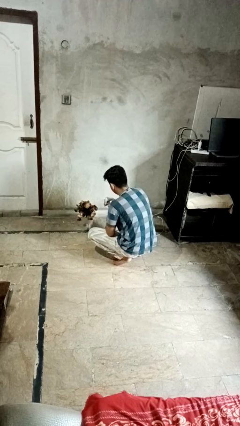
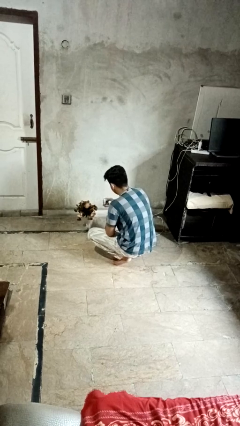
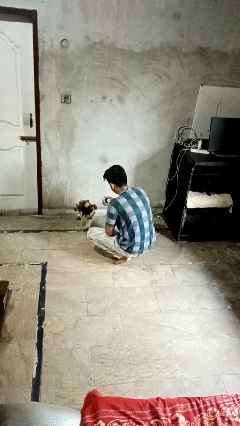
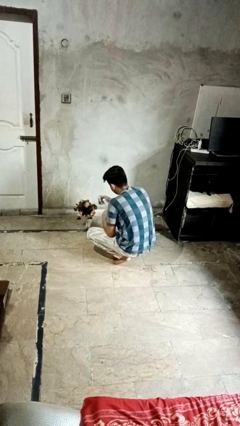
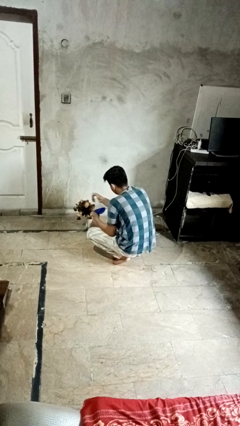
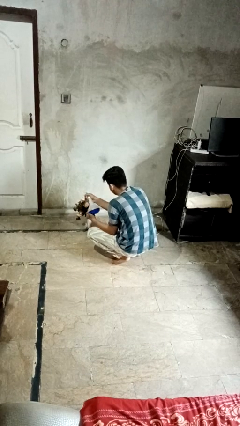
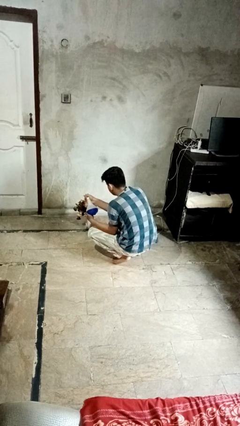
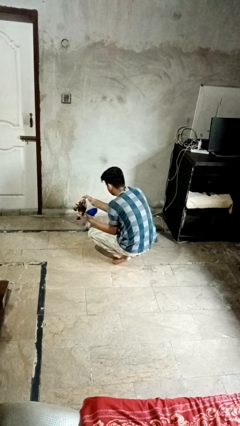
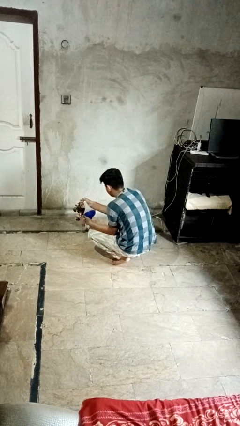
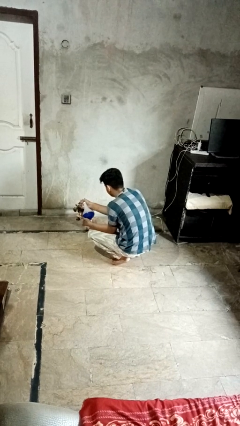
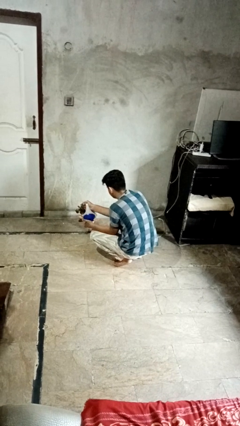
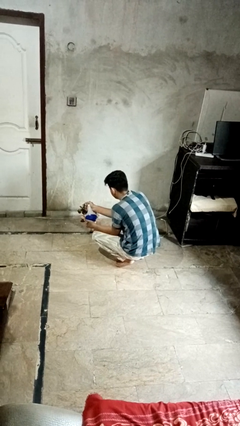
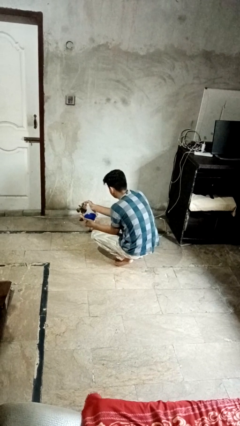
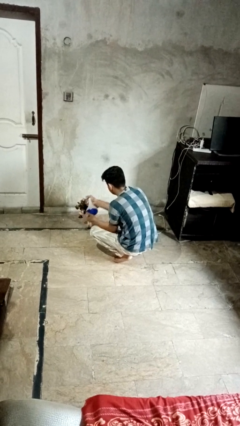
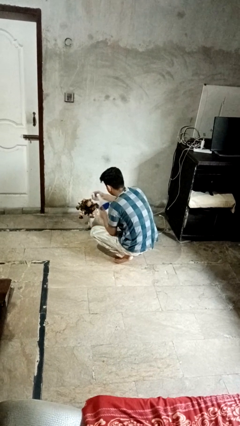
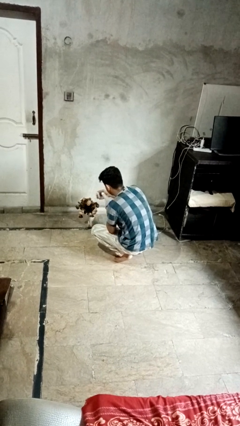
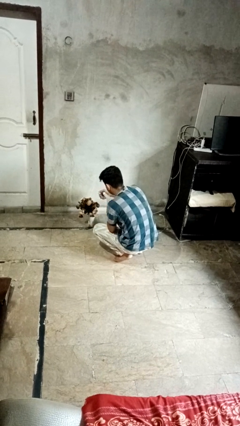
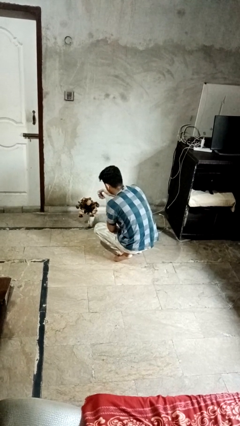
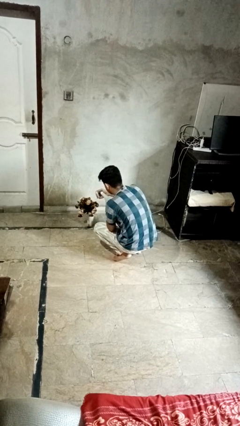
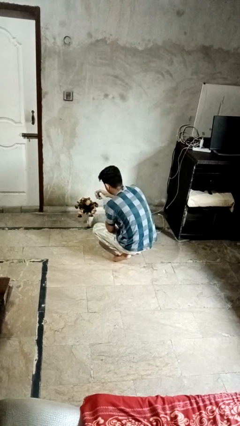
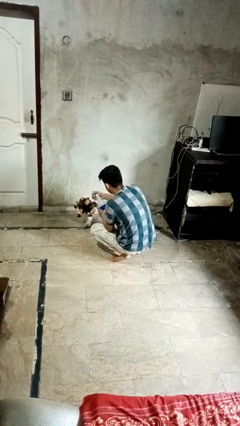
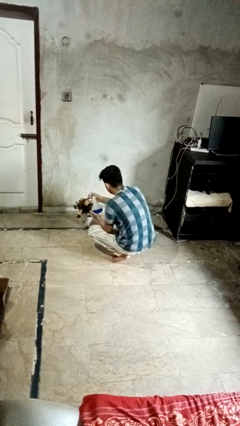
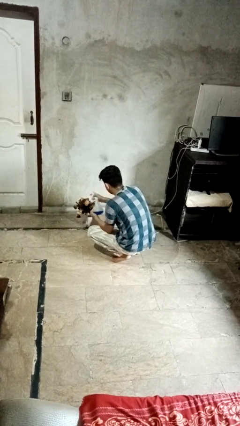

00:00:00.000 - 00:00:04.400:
person waters houseplant

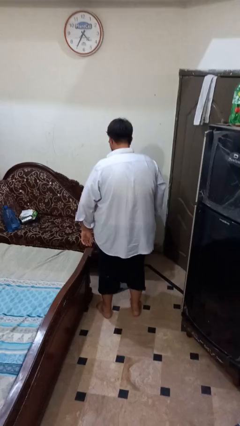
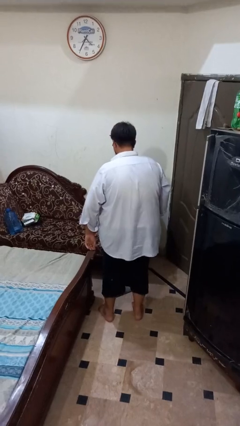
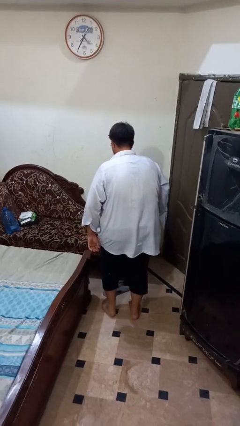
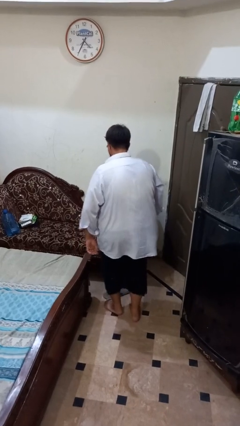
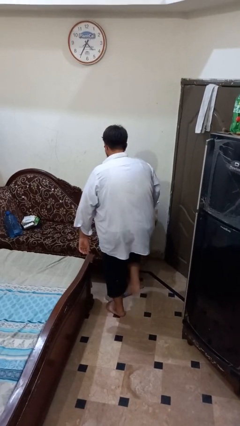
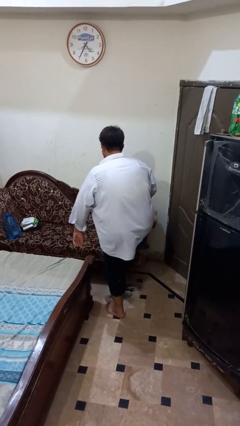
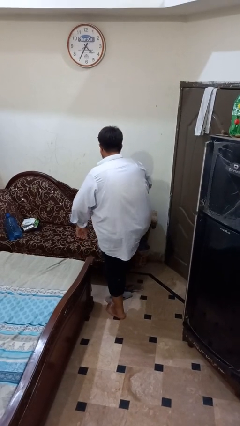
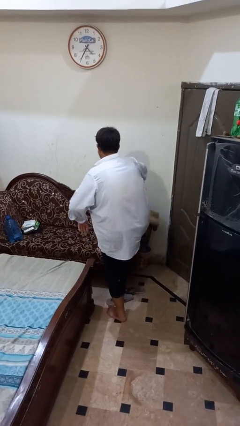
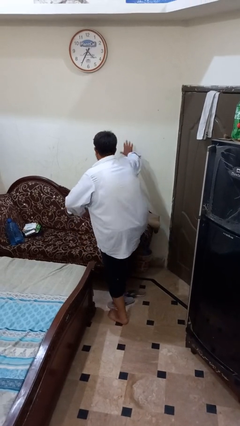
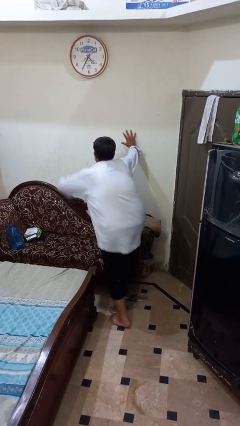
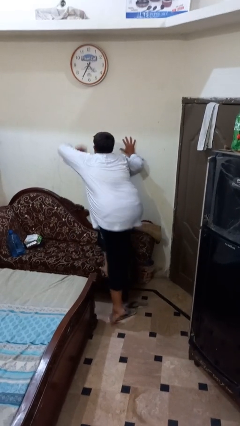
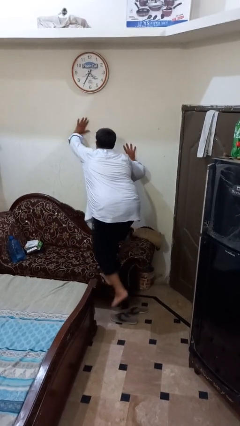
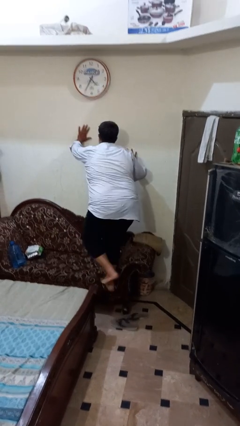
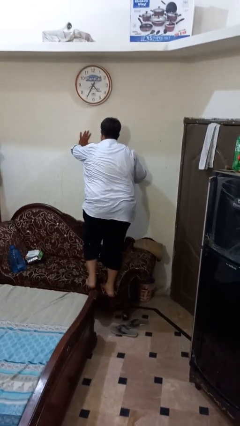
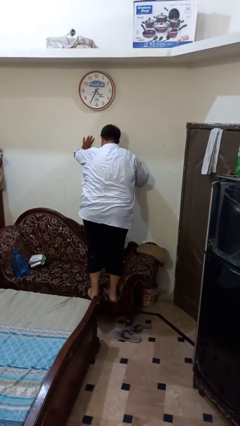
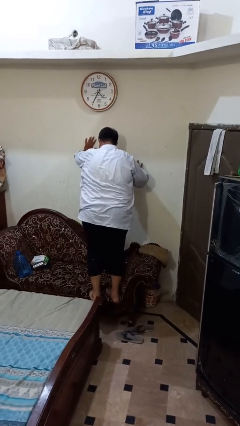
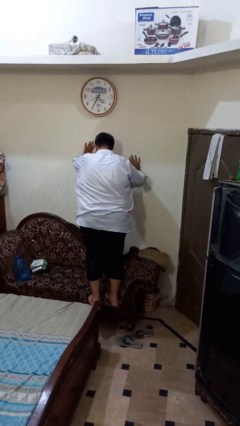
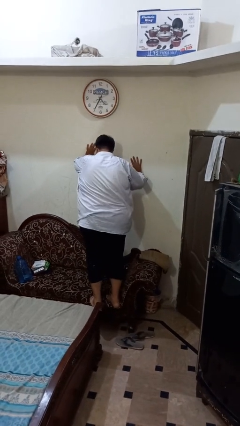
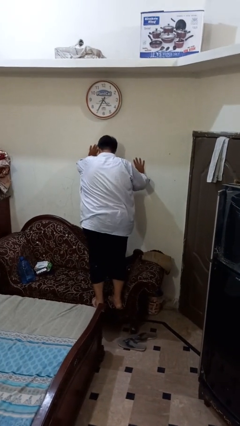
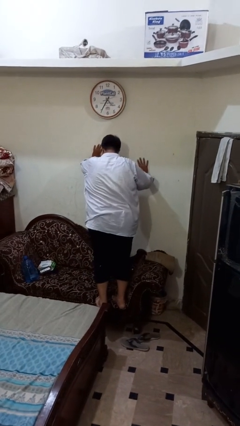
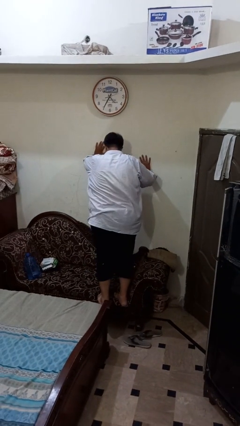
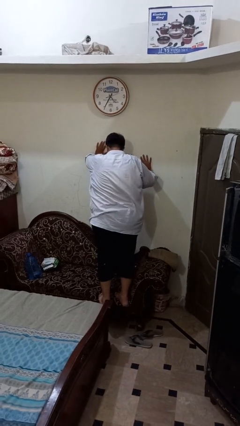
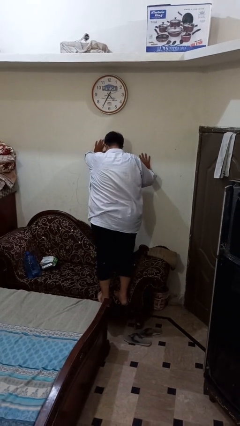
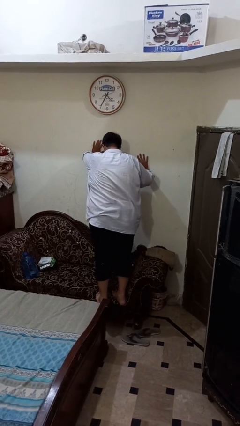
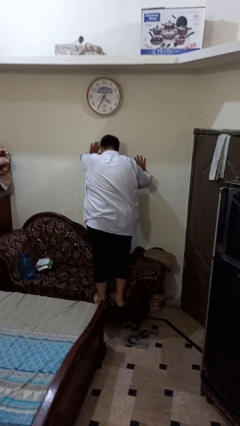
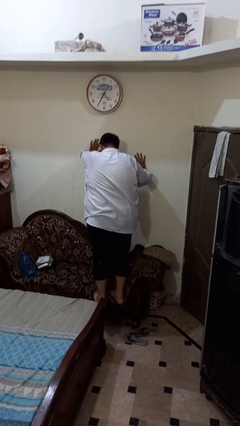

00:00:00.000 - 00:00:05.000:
person climbs on couch

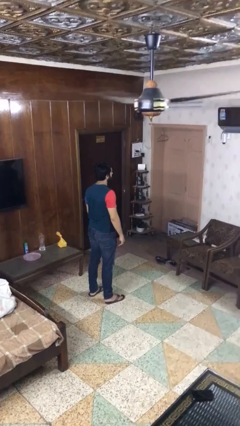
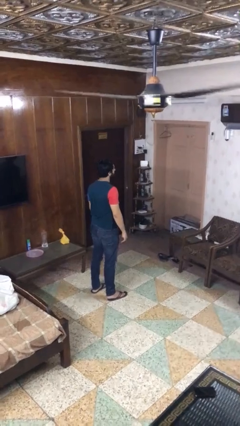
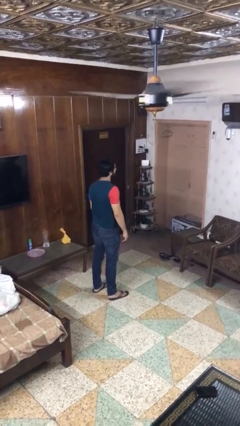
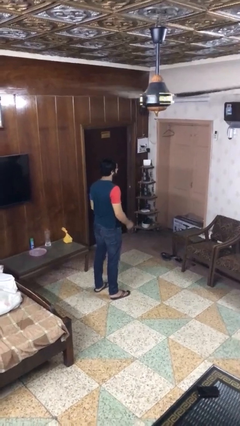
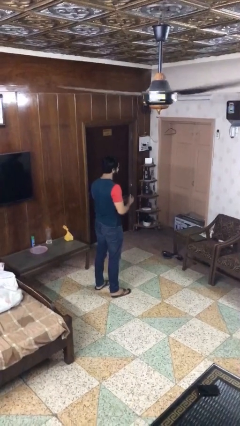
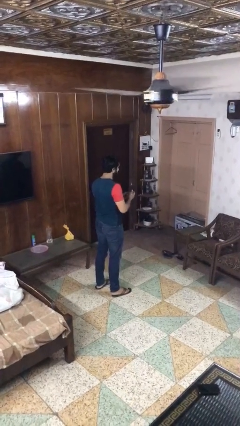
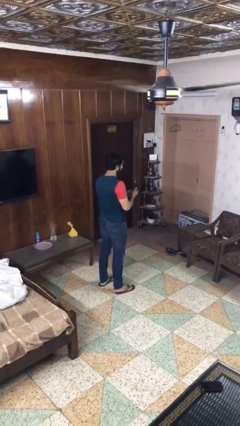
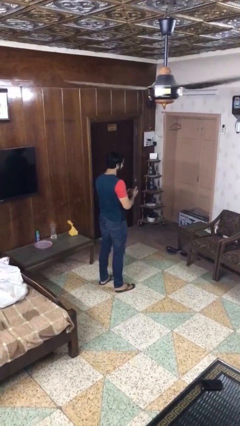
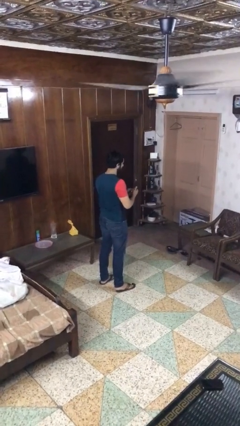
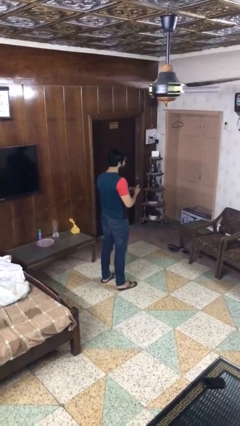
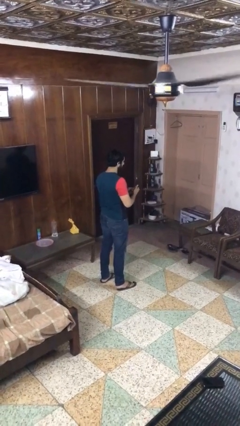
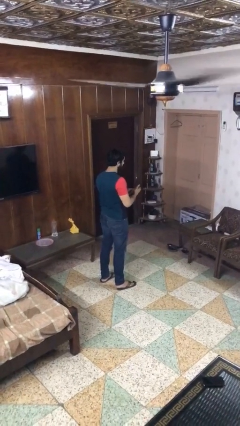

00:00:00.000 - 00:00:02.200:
person files fingernails

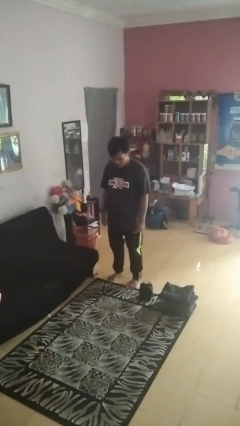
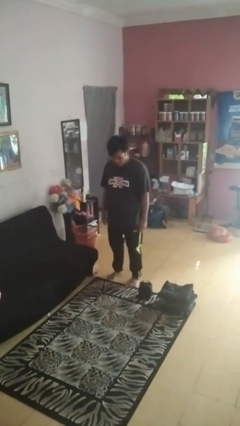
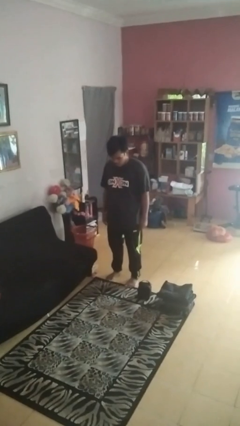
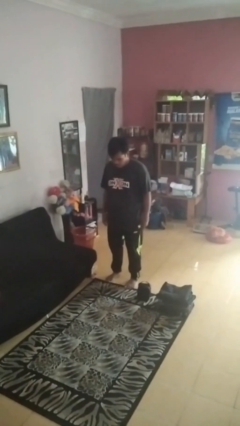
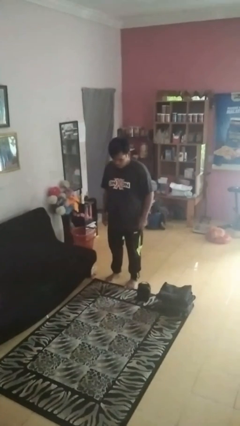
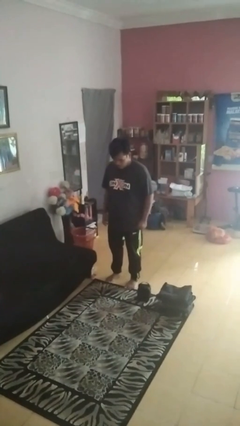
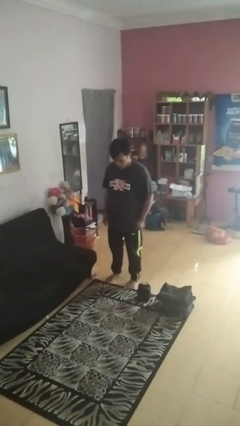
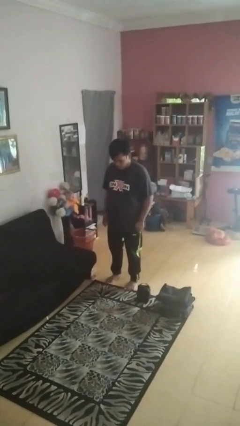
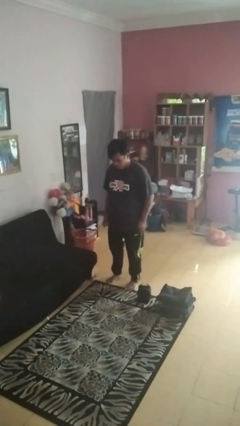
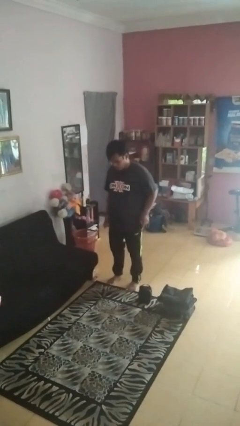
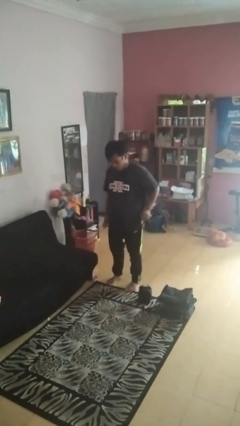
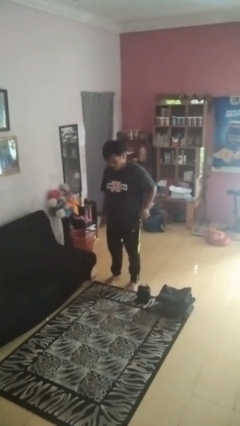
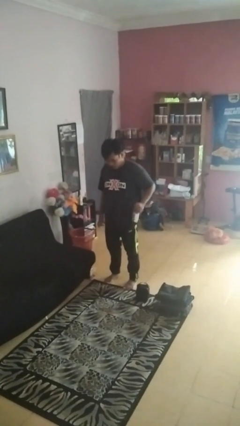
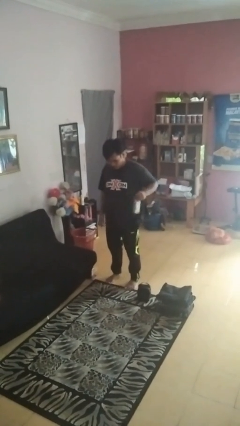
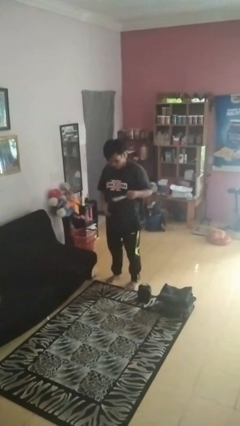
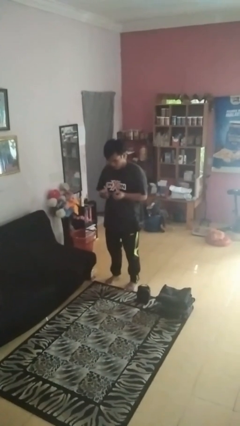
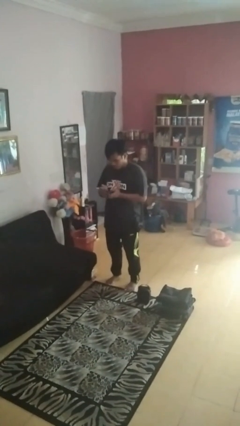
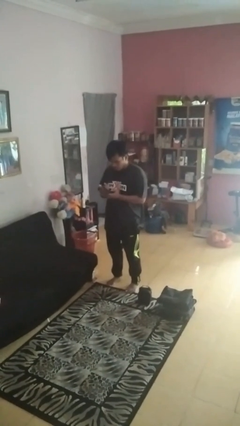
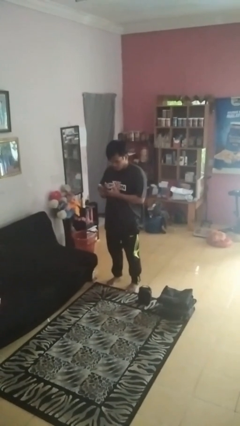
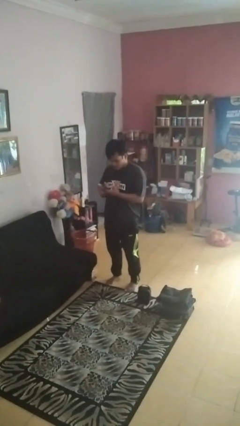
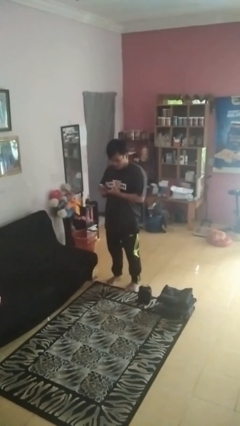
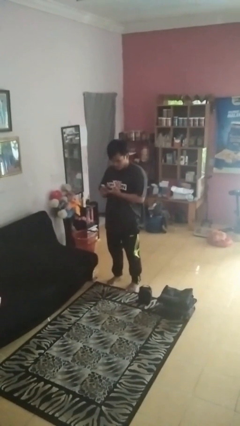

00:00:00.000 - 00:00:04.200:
person takes phone from pocket

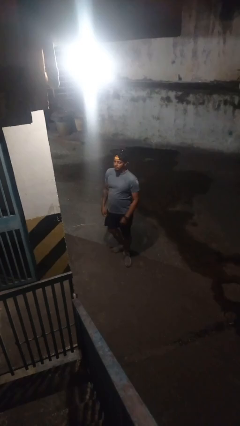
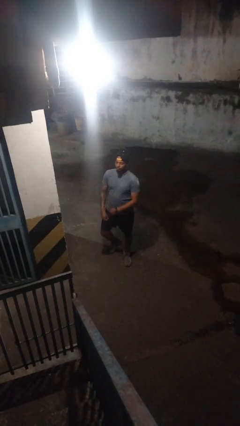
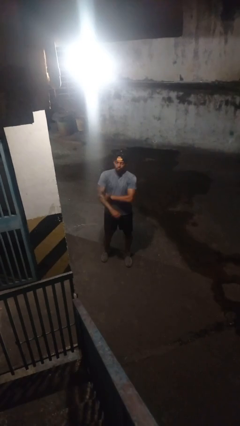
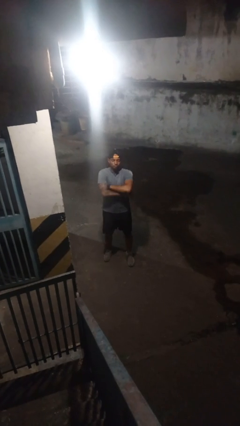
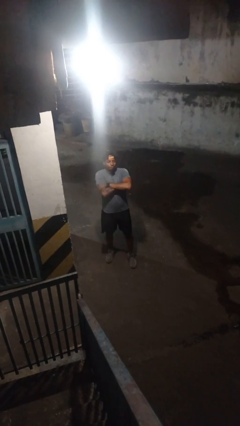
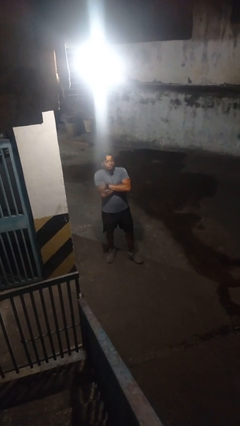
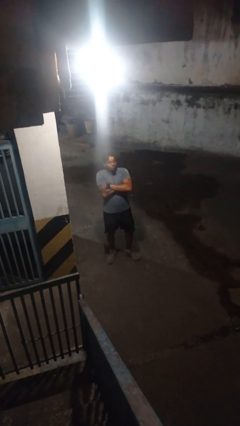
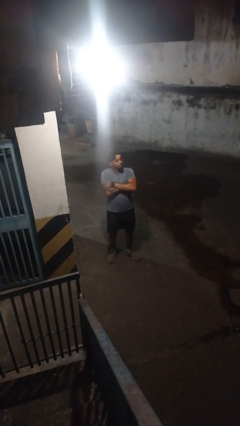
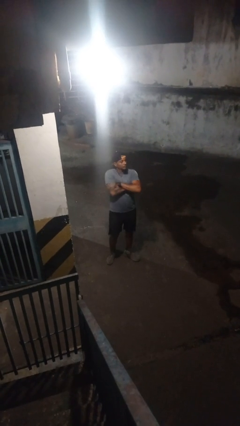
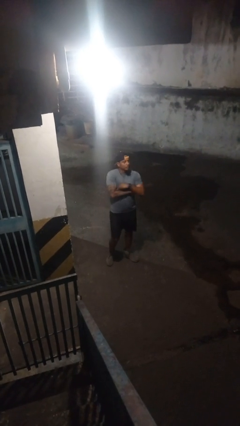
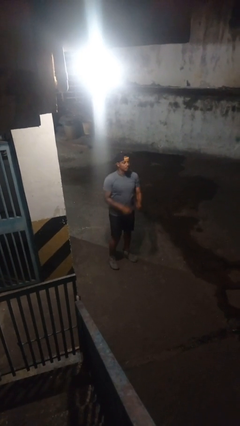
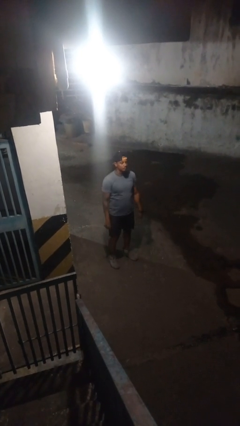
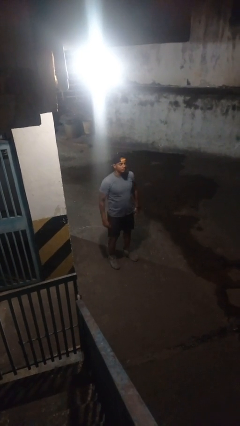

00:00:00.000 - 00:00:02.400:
person crosses arms
